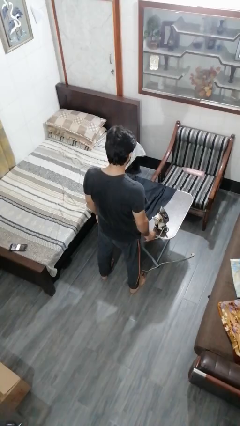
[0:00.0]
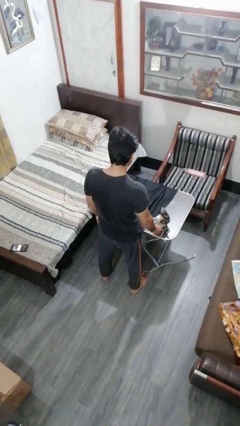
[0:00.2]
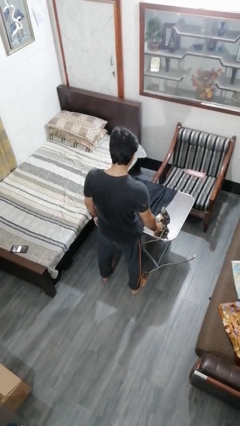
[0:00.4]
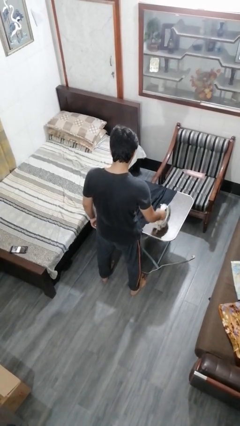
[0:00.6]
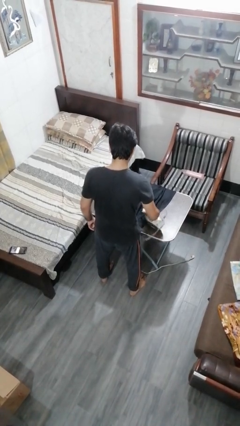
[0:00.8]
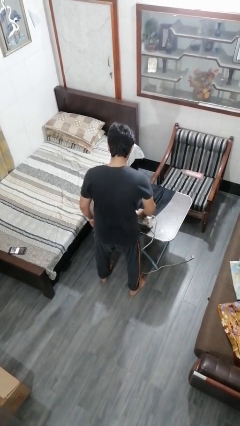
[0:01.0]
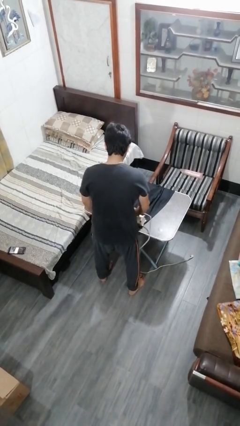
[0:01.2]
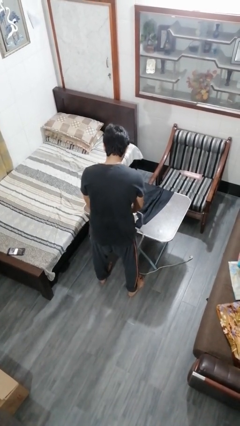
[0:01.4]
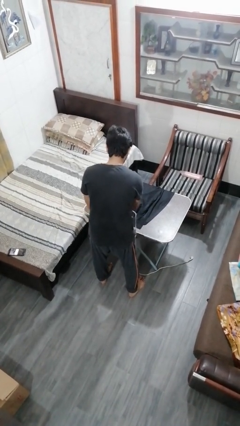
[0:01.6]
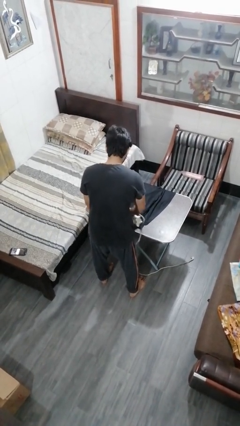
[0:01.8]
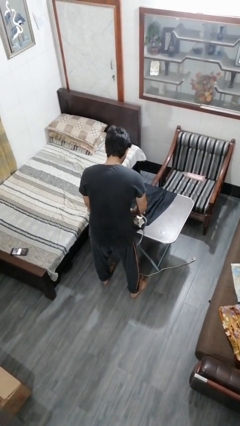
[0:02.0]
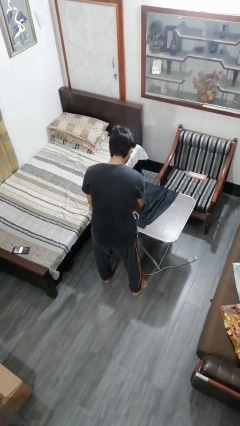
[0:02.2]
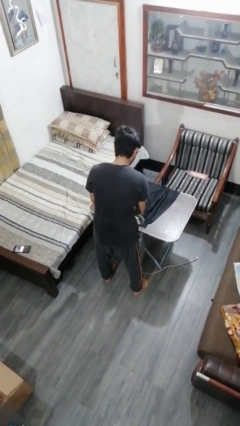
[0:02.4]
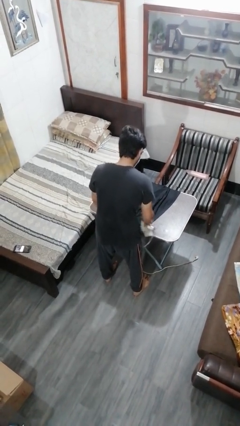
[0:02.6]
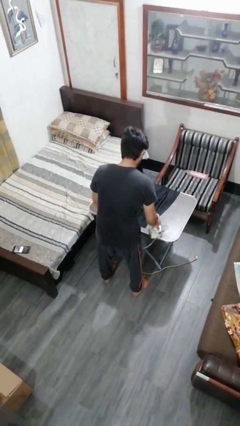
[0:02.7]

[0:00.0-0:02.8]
person irons clothes

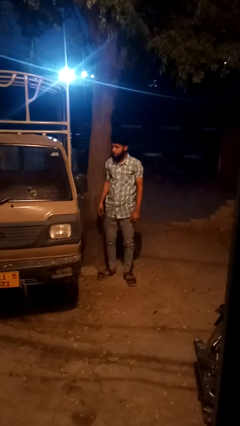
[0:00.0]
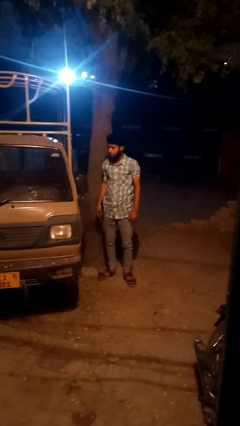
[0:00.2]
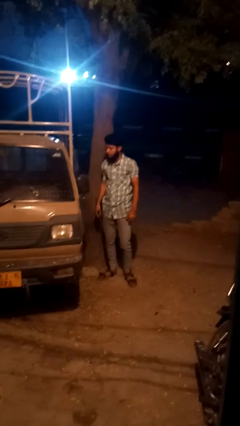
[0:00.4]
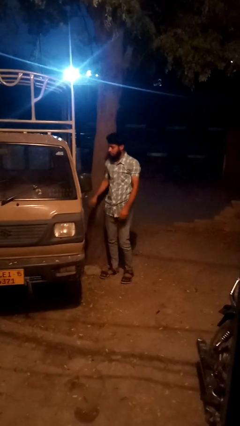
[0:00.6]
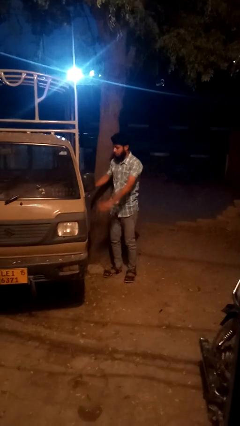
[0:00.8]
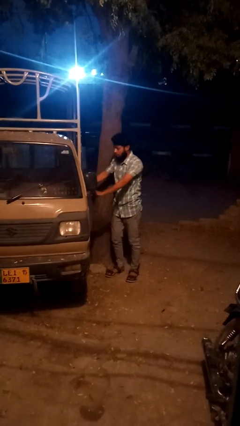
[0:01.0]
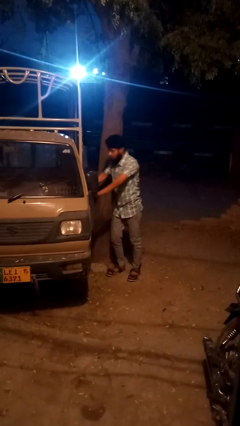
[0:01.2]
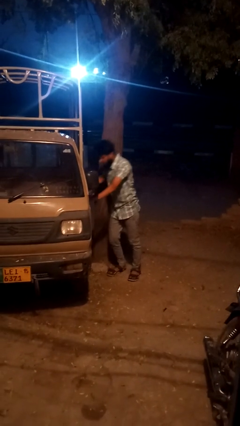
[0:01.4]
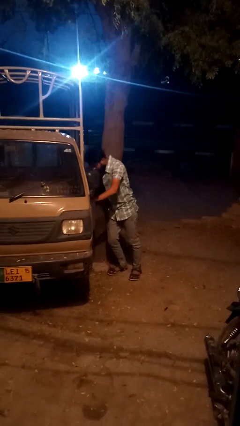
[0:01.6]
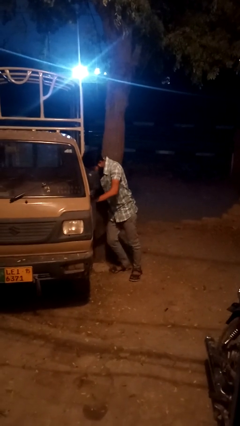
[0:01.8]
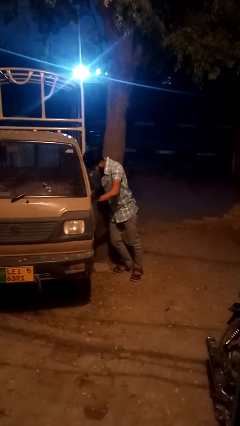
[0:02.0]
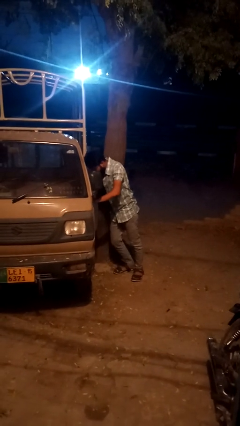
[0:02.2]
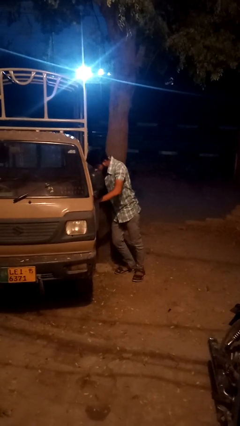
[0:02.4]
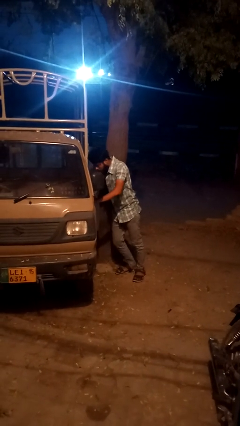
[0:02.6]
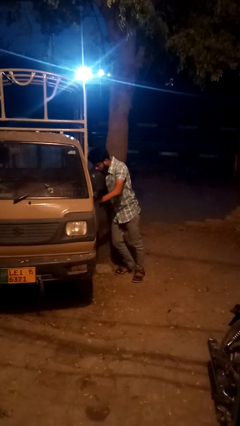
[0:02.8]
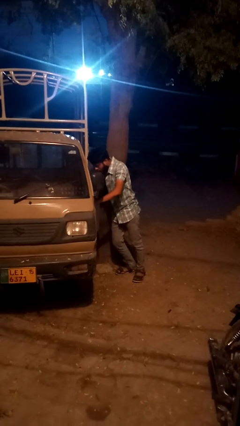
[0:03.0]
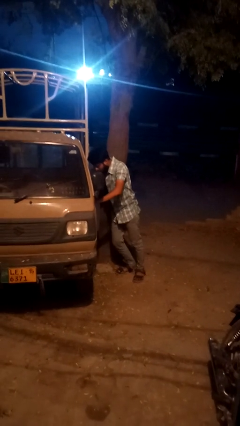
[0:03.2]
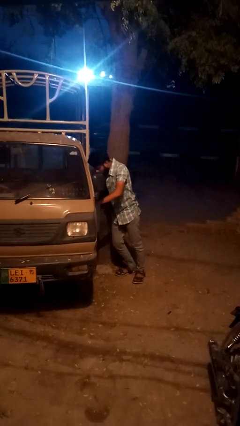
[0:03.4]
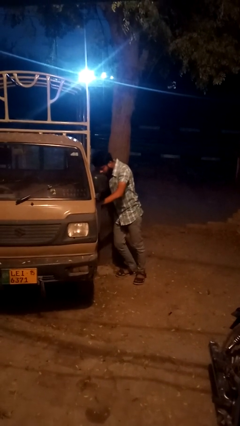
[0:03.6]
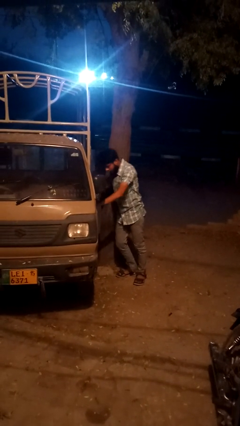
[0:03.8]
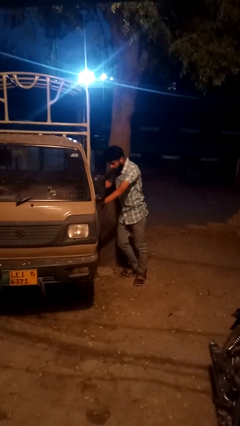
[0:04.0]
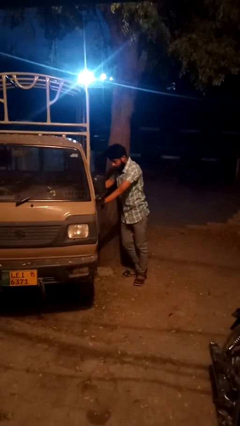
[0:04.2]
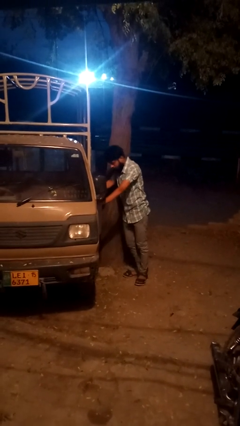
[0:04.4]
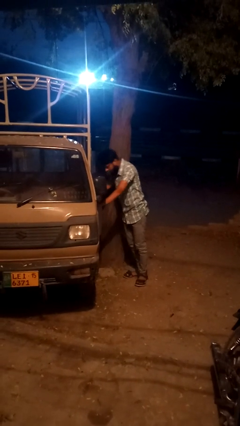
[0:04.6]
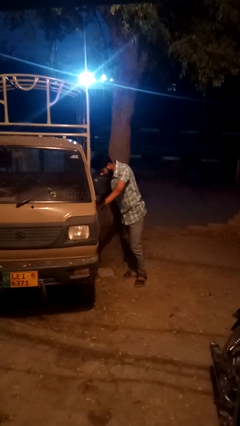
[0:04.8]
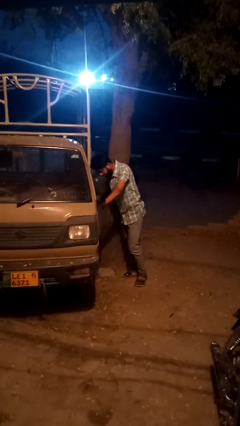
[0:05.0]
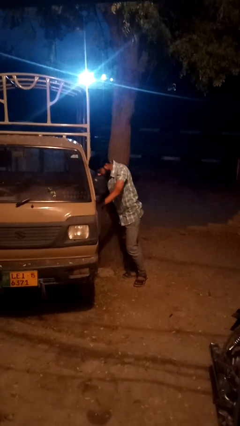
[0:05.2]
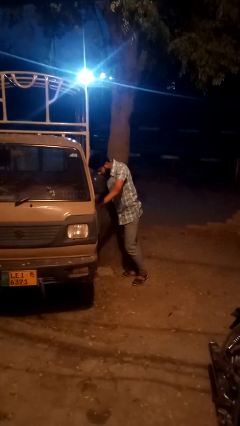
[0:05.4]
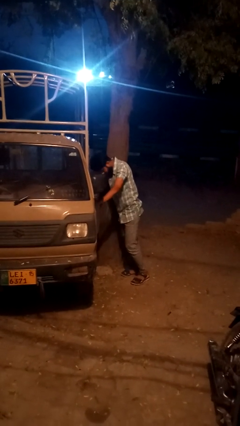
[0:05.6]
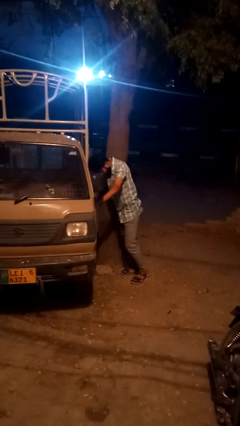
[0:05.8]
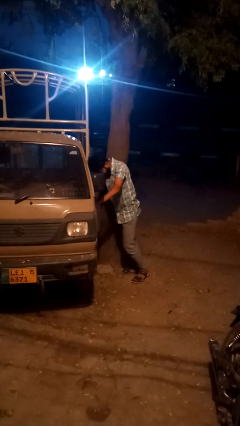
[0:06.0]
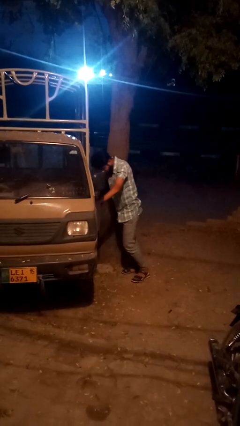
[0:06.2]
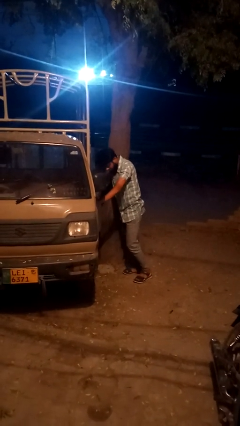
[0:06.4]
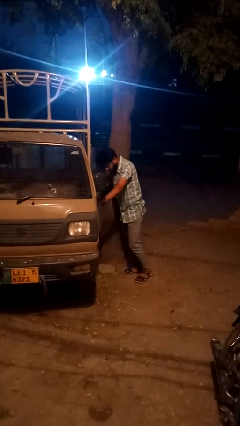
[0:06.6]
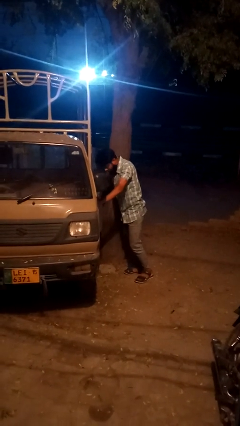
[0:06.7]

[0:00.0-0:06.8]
person leans against car

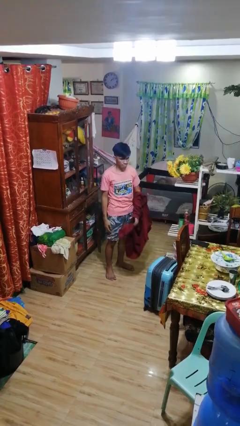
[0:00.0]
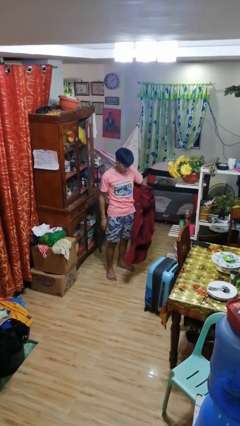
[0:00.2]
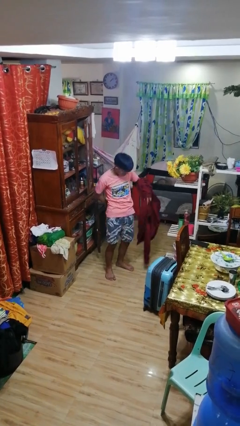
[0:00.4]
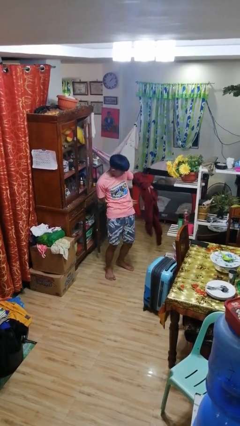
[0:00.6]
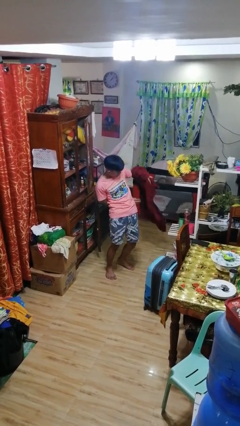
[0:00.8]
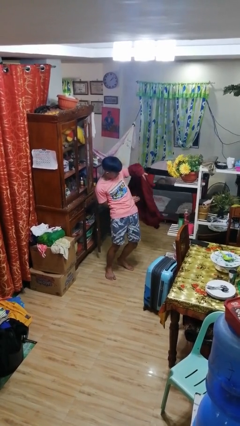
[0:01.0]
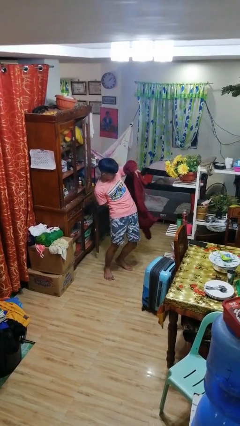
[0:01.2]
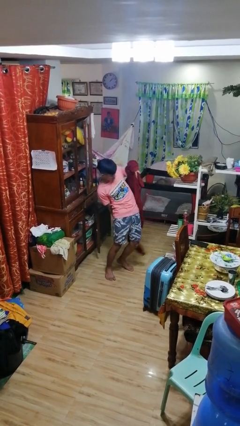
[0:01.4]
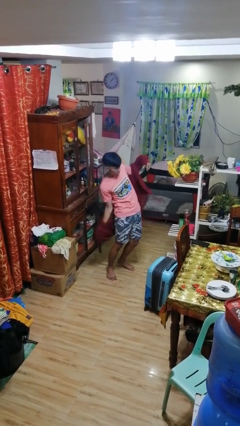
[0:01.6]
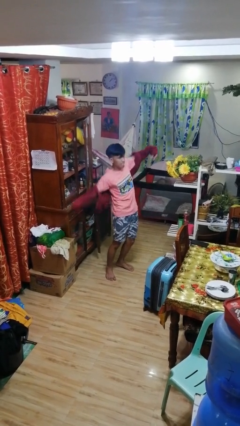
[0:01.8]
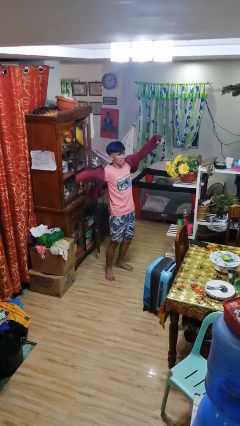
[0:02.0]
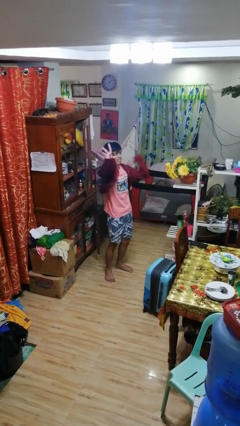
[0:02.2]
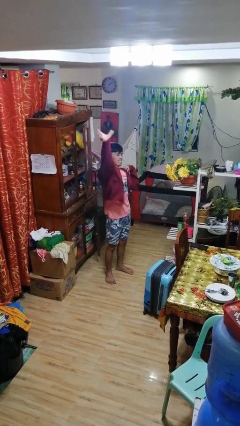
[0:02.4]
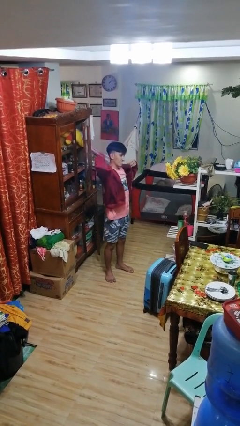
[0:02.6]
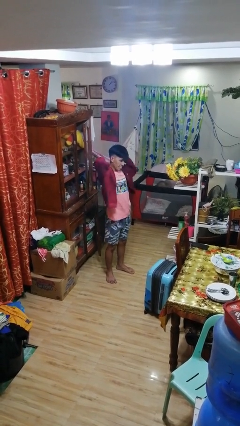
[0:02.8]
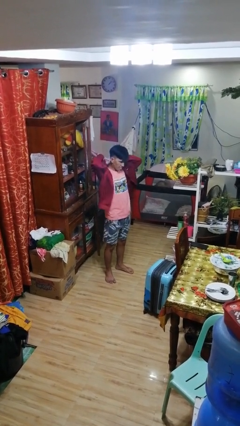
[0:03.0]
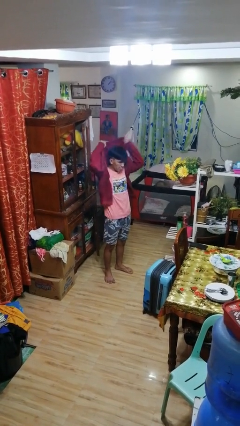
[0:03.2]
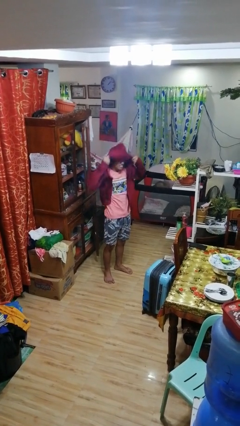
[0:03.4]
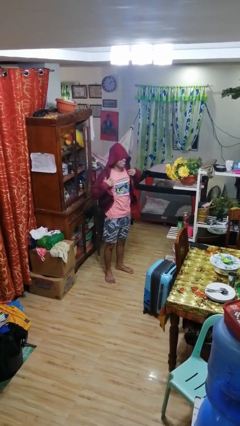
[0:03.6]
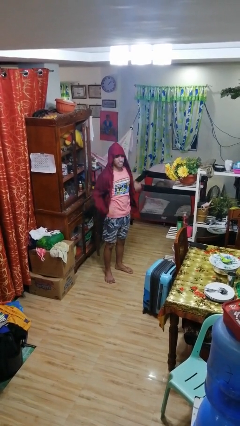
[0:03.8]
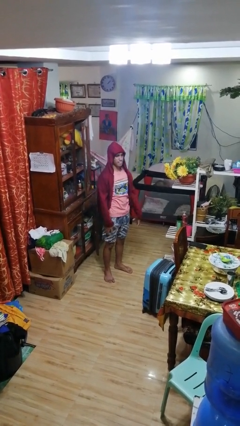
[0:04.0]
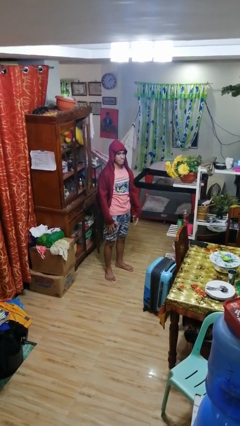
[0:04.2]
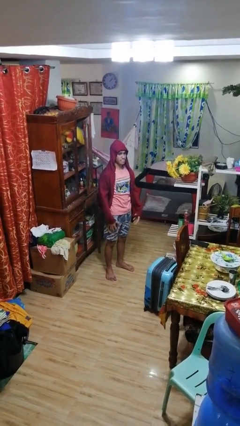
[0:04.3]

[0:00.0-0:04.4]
person puts on hoodie

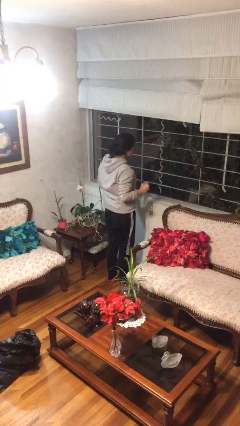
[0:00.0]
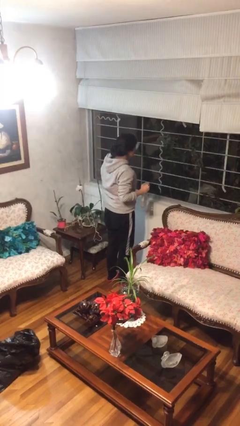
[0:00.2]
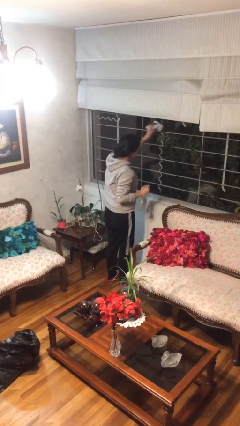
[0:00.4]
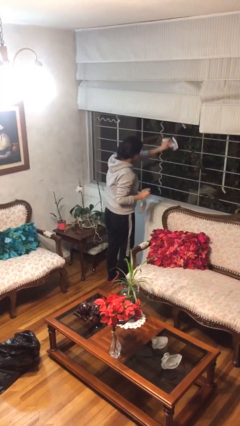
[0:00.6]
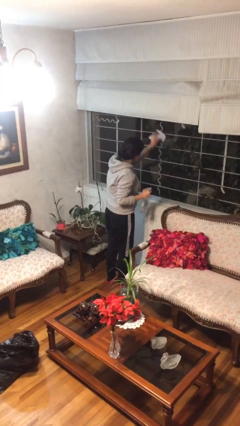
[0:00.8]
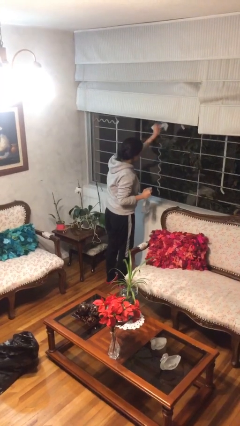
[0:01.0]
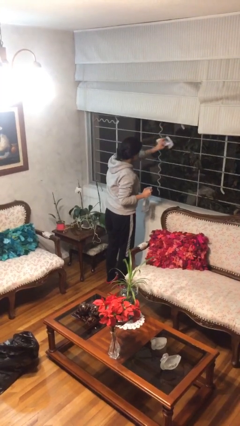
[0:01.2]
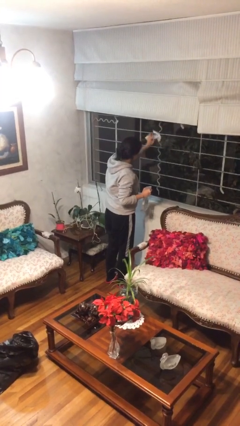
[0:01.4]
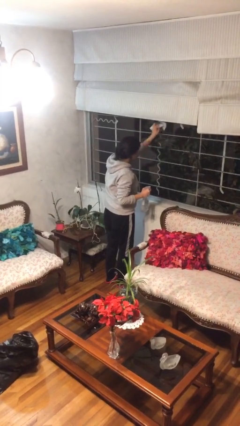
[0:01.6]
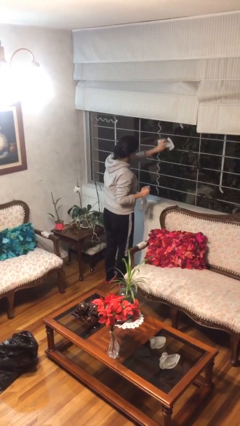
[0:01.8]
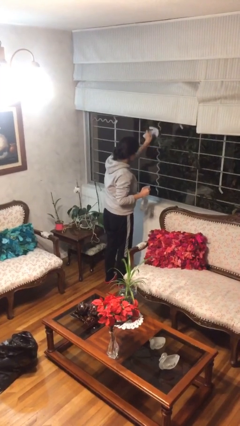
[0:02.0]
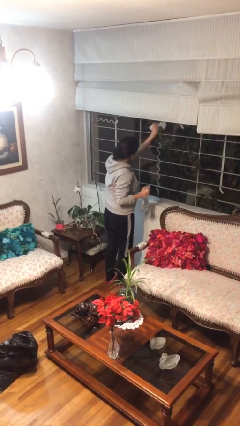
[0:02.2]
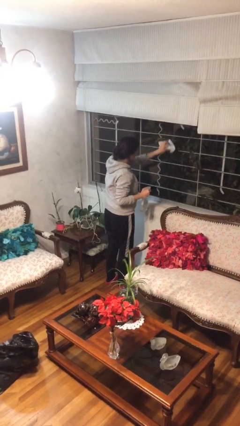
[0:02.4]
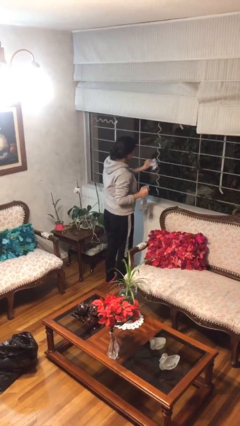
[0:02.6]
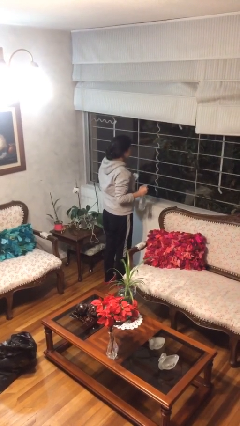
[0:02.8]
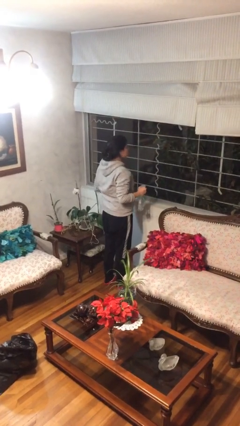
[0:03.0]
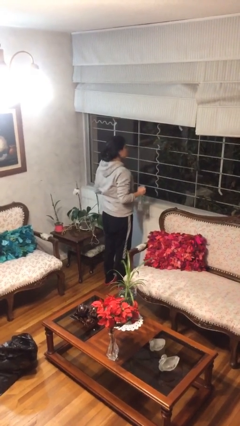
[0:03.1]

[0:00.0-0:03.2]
person washes window

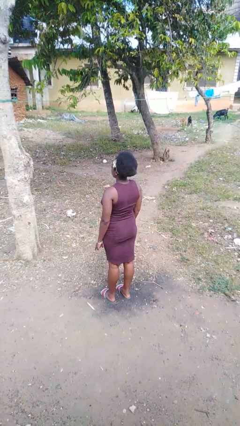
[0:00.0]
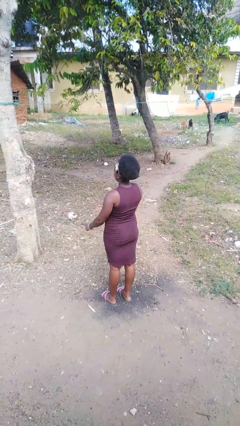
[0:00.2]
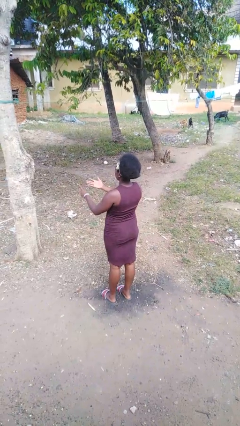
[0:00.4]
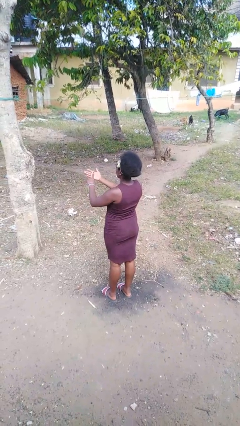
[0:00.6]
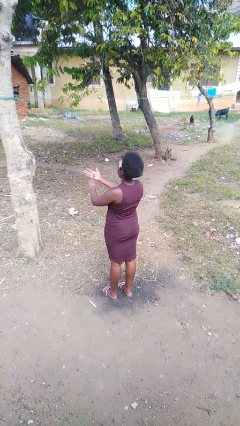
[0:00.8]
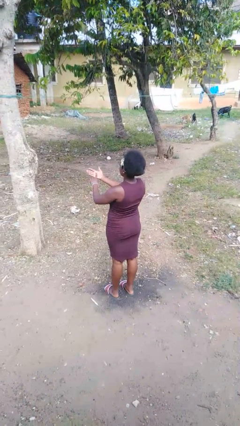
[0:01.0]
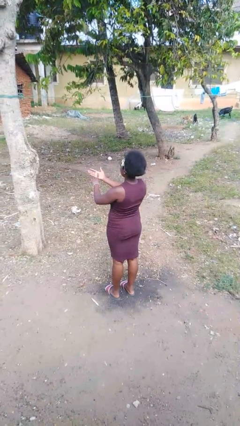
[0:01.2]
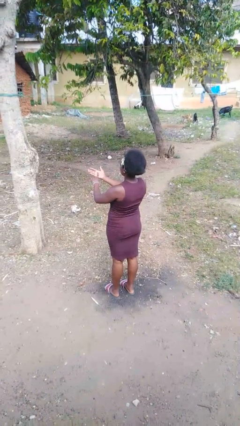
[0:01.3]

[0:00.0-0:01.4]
person gestures number one
